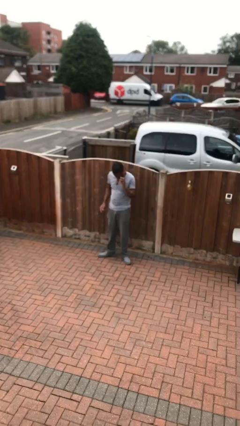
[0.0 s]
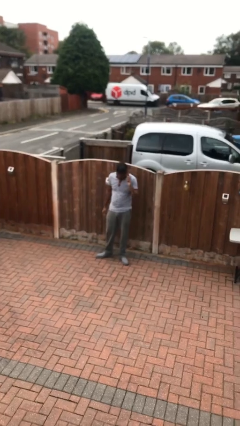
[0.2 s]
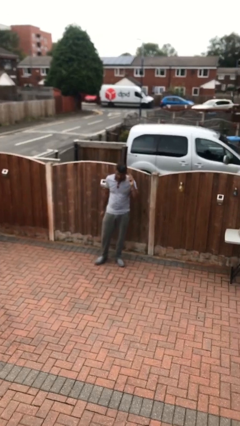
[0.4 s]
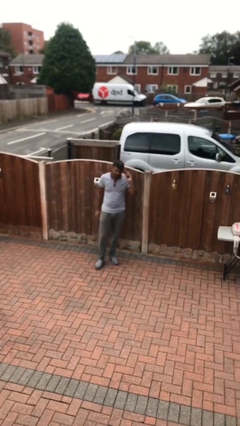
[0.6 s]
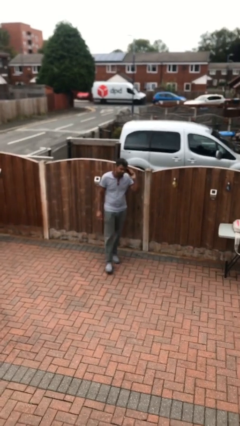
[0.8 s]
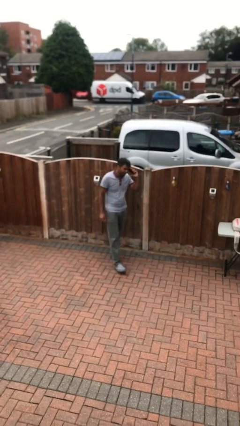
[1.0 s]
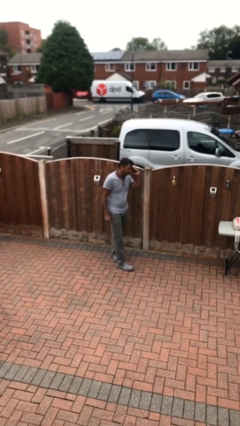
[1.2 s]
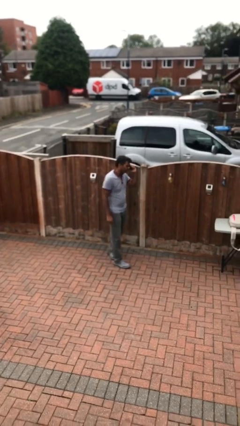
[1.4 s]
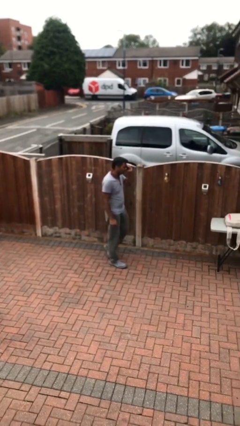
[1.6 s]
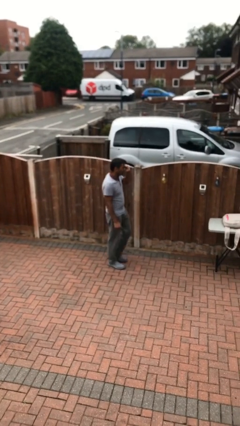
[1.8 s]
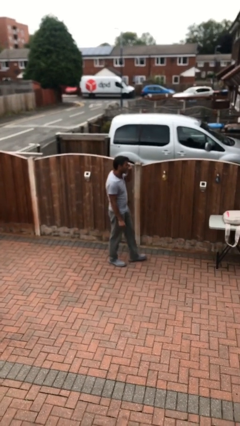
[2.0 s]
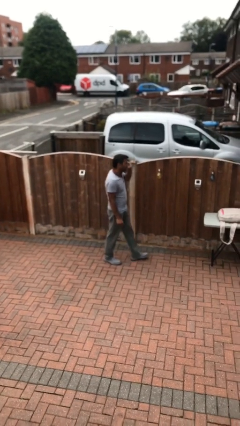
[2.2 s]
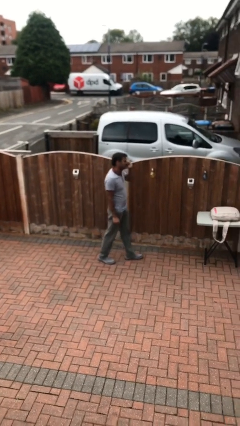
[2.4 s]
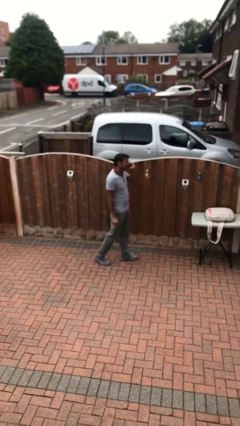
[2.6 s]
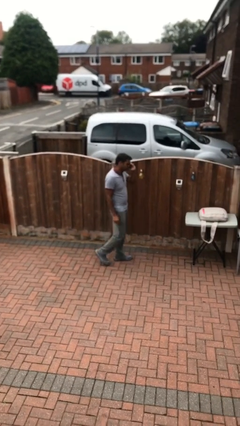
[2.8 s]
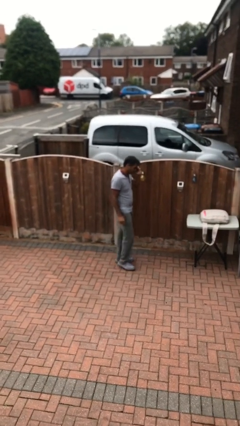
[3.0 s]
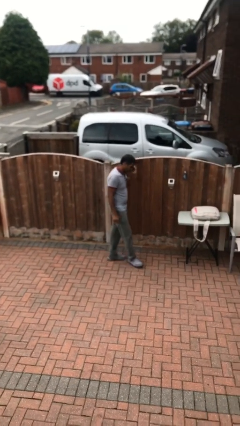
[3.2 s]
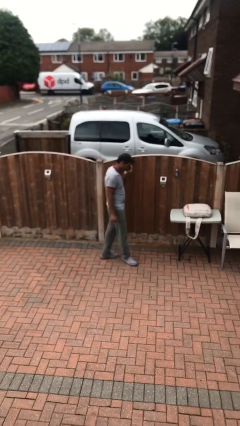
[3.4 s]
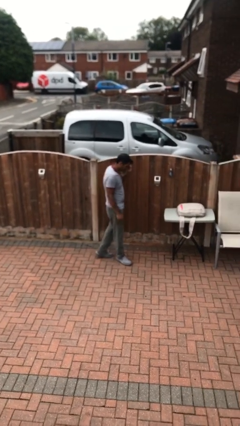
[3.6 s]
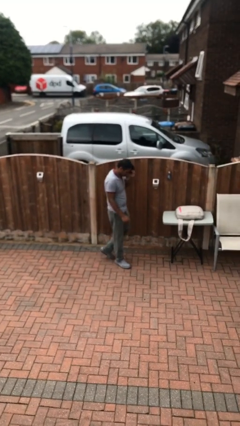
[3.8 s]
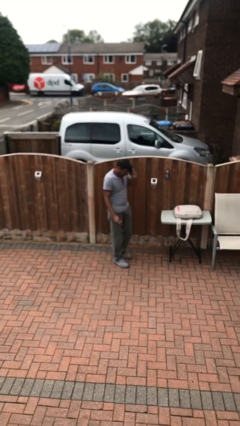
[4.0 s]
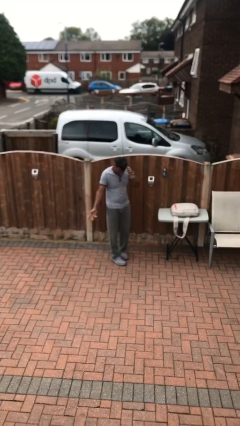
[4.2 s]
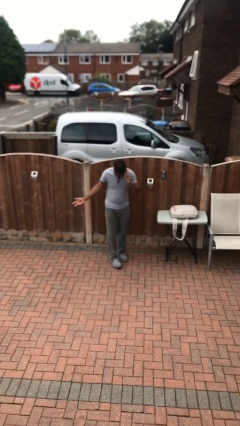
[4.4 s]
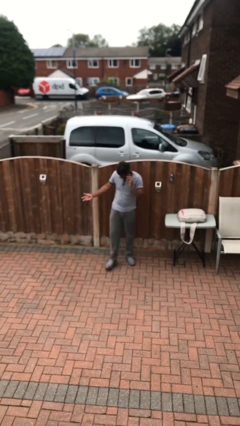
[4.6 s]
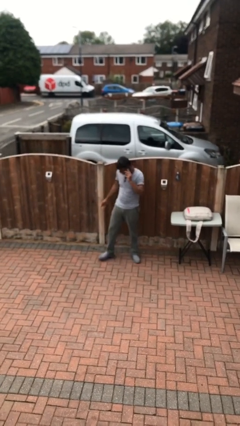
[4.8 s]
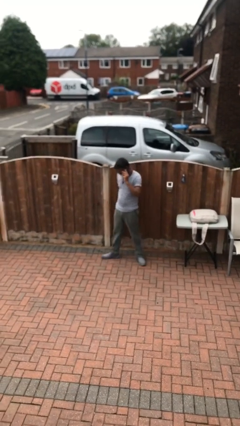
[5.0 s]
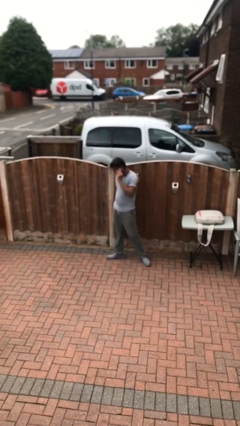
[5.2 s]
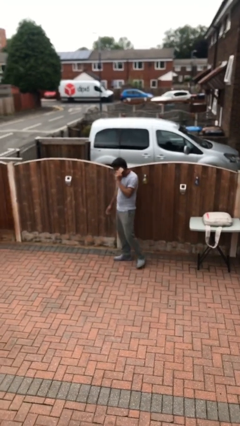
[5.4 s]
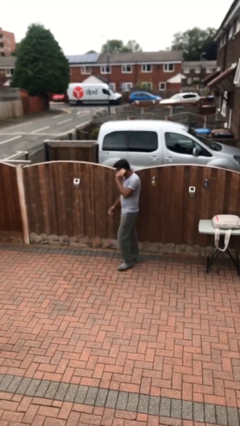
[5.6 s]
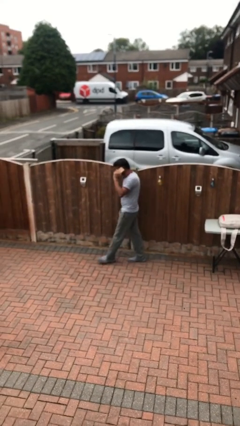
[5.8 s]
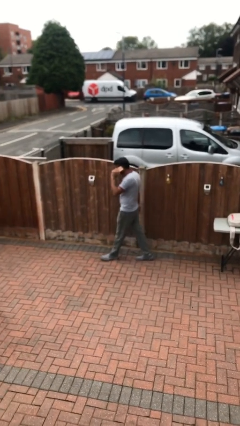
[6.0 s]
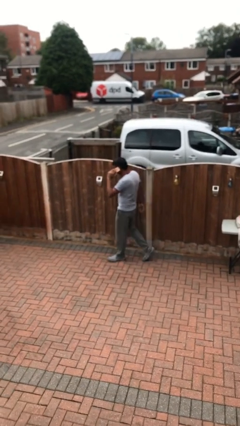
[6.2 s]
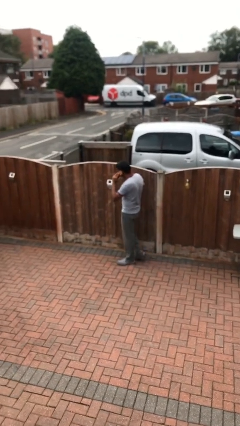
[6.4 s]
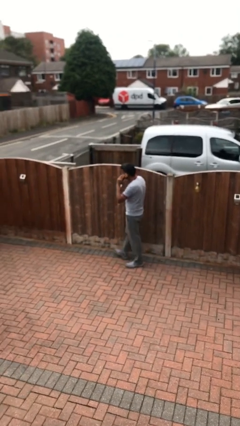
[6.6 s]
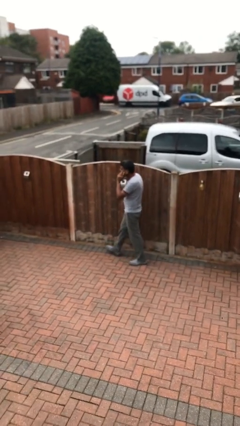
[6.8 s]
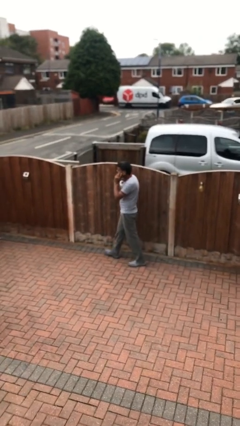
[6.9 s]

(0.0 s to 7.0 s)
person talks on phone

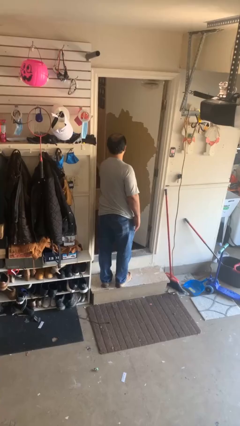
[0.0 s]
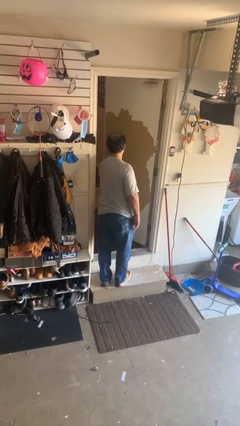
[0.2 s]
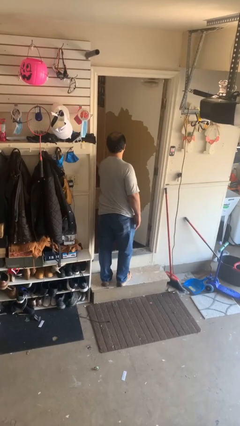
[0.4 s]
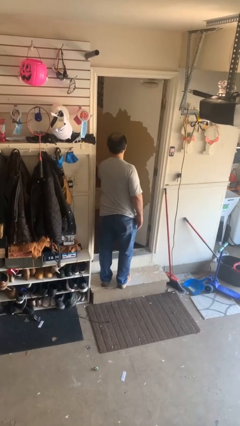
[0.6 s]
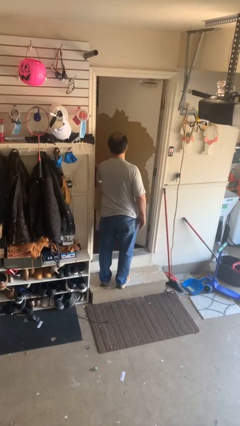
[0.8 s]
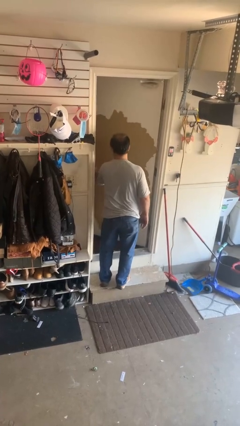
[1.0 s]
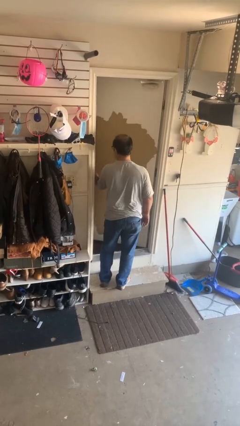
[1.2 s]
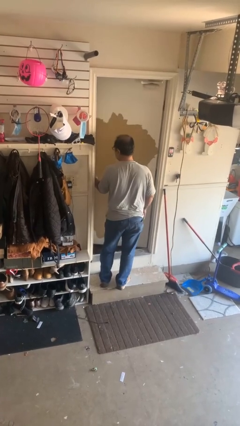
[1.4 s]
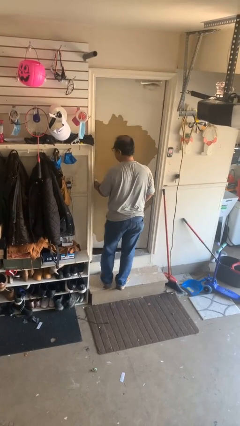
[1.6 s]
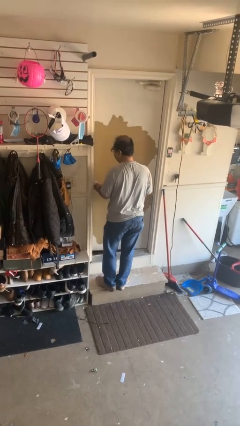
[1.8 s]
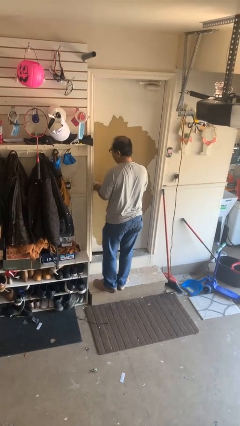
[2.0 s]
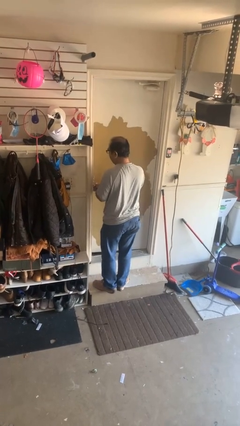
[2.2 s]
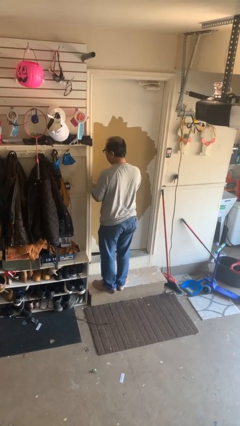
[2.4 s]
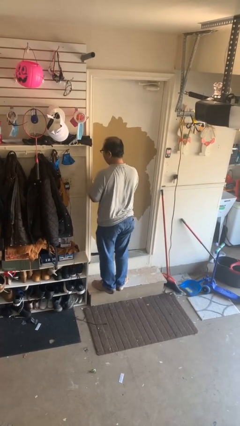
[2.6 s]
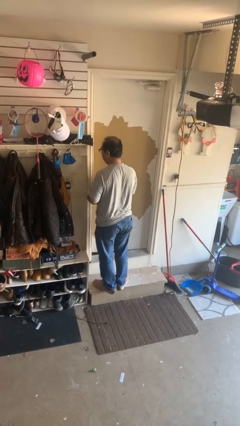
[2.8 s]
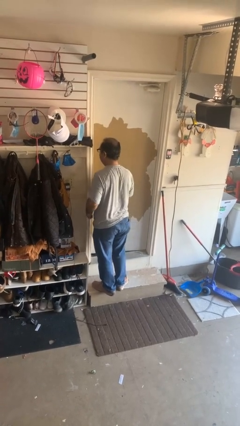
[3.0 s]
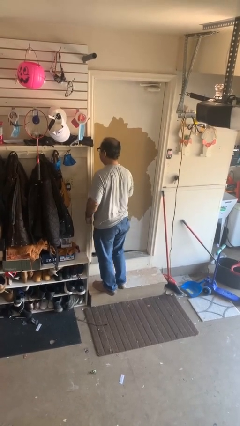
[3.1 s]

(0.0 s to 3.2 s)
person closes facility door

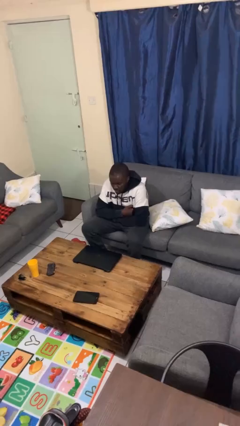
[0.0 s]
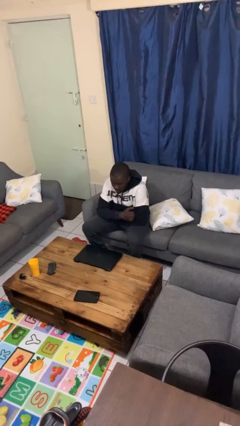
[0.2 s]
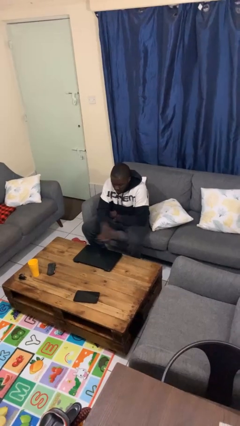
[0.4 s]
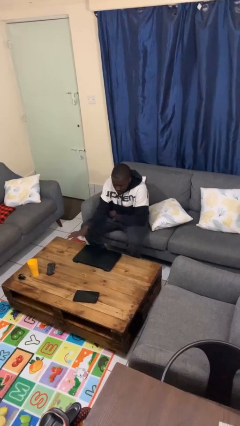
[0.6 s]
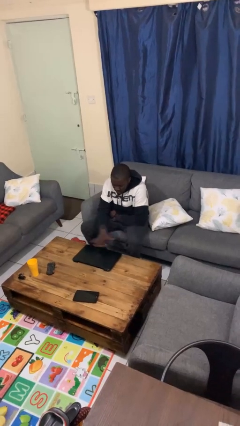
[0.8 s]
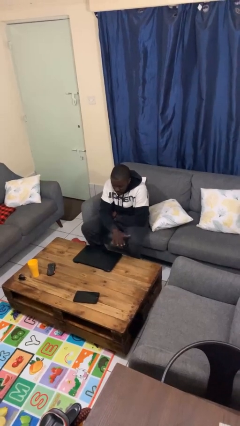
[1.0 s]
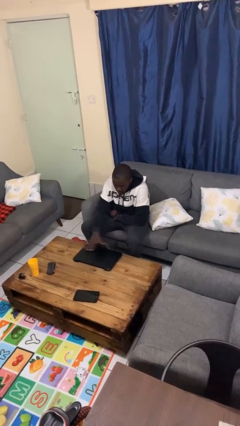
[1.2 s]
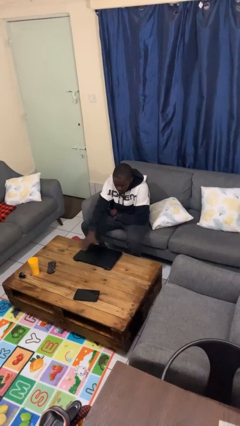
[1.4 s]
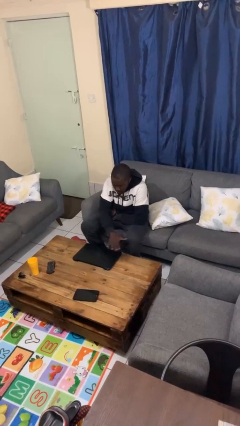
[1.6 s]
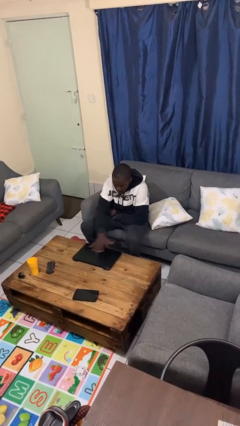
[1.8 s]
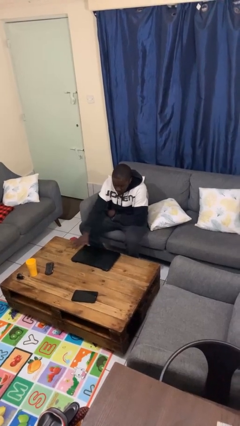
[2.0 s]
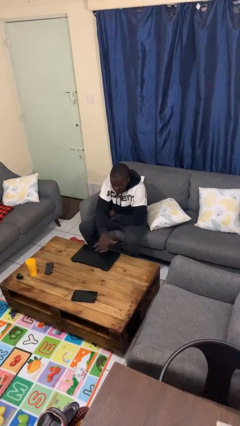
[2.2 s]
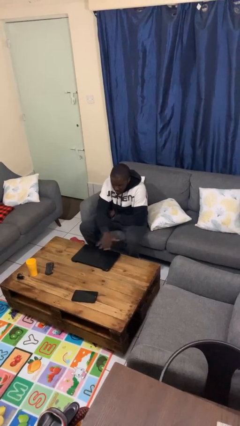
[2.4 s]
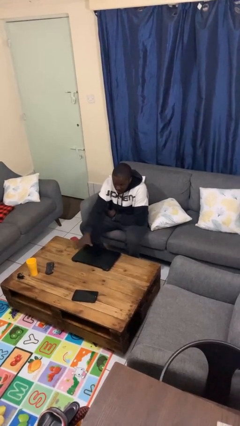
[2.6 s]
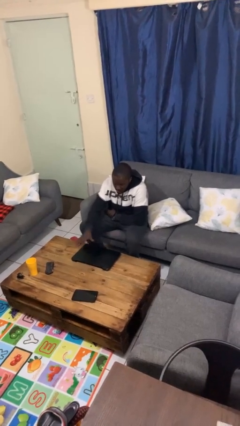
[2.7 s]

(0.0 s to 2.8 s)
person waves hand over object

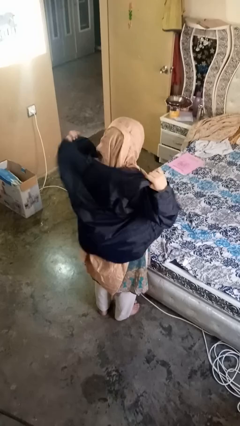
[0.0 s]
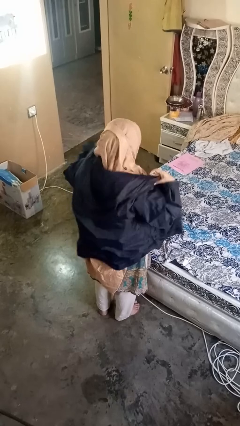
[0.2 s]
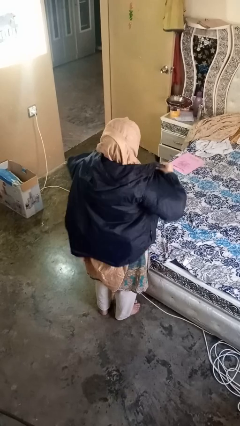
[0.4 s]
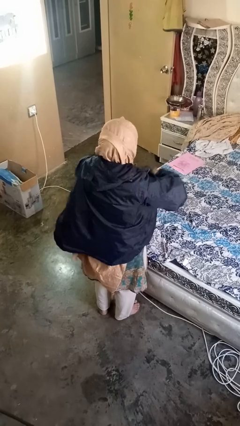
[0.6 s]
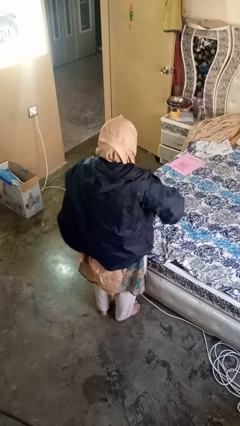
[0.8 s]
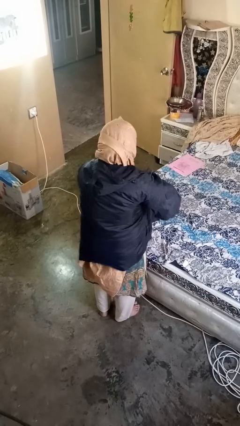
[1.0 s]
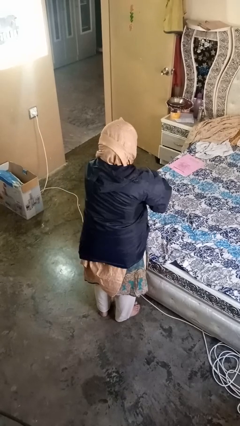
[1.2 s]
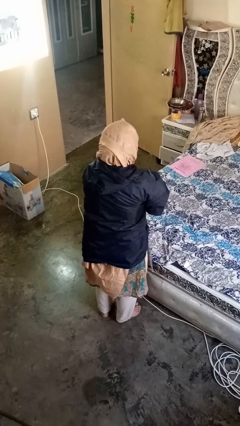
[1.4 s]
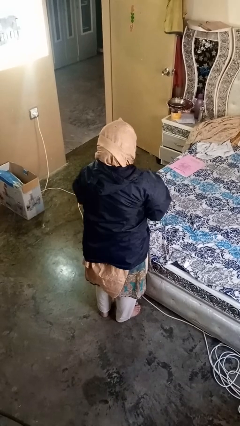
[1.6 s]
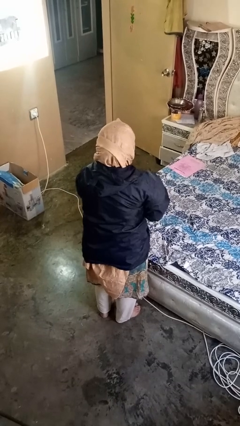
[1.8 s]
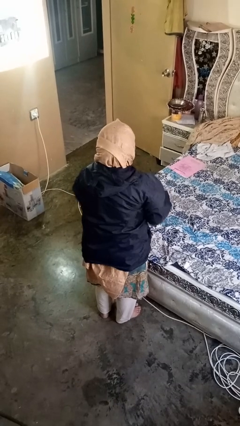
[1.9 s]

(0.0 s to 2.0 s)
person zips up jacket

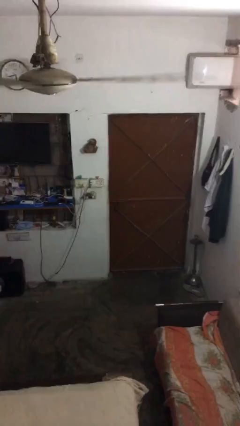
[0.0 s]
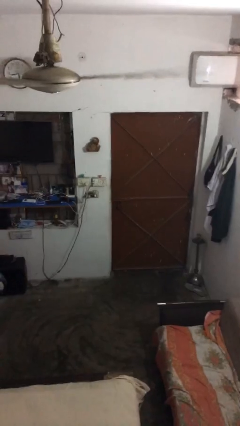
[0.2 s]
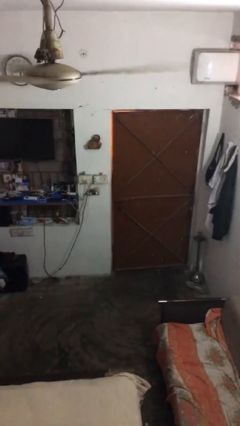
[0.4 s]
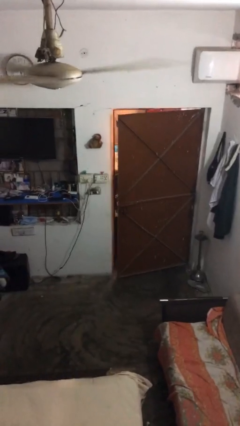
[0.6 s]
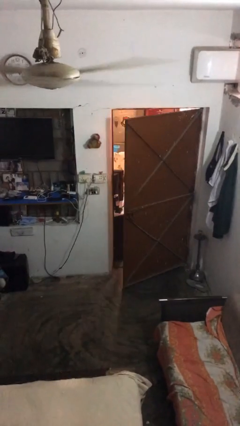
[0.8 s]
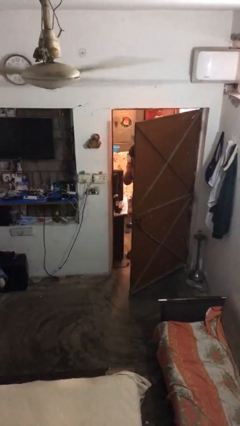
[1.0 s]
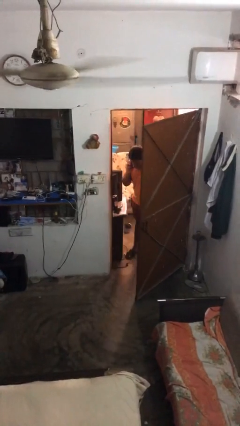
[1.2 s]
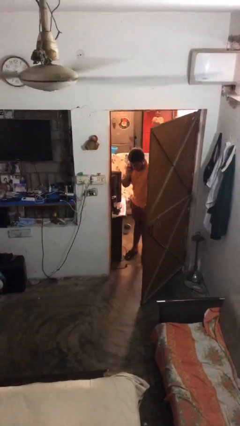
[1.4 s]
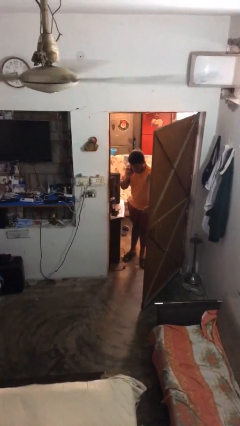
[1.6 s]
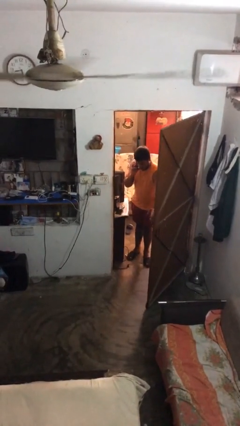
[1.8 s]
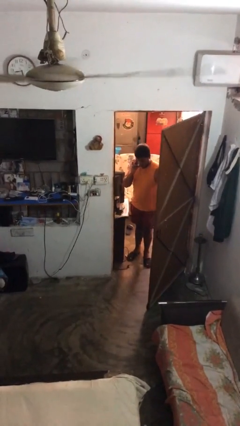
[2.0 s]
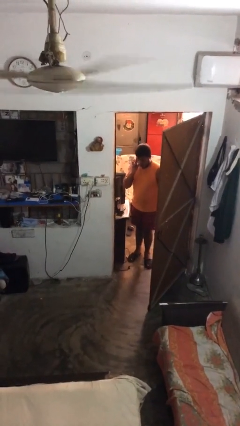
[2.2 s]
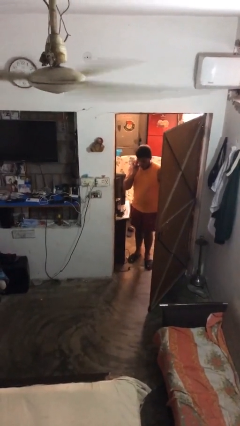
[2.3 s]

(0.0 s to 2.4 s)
person opens facility door
